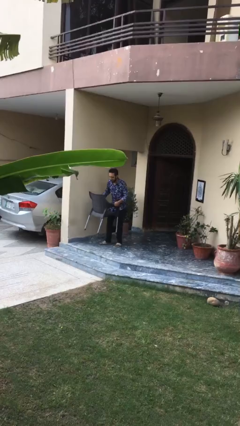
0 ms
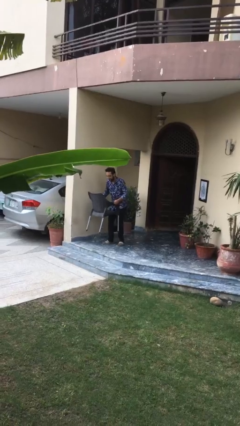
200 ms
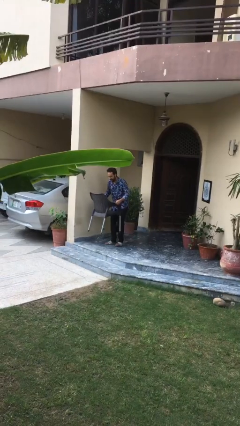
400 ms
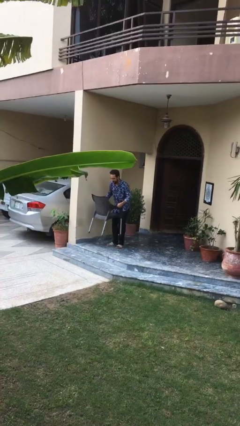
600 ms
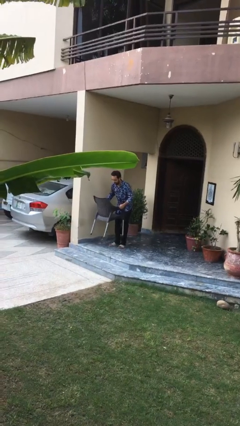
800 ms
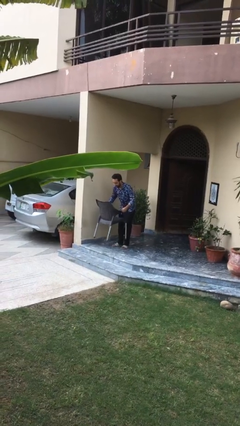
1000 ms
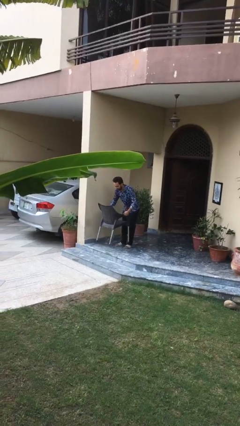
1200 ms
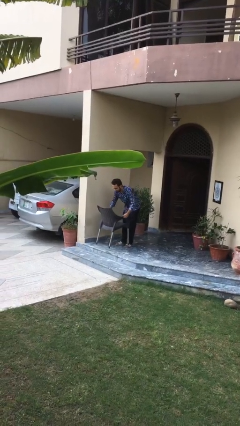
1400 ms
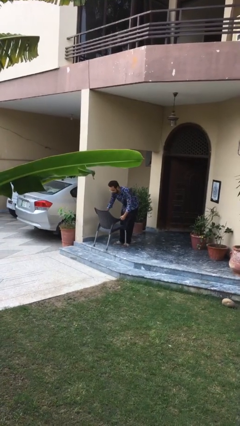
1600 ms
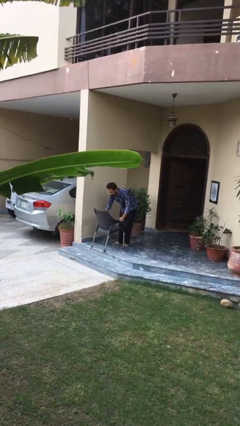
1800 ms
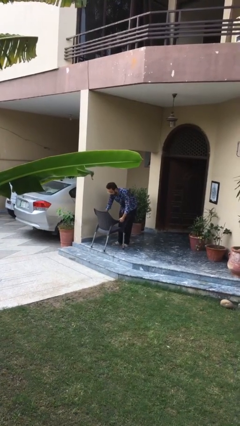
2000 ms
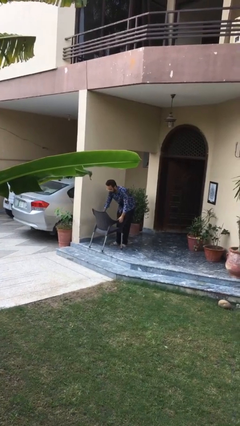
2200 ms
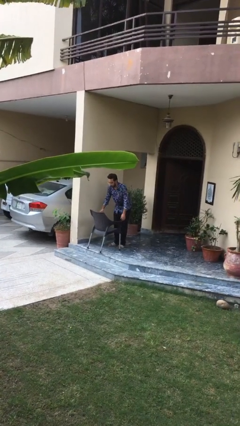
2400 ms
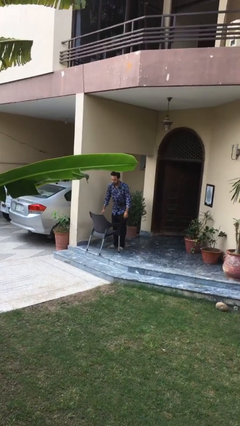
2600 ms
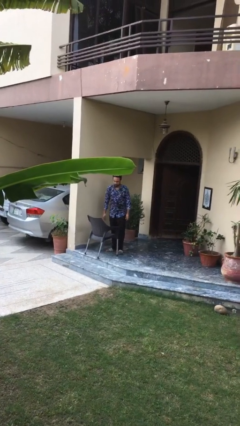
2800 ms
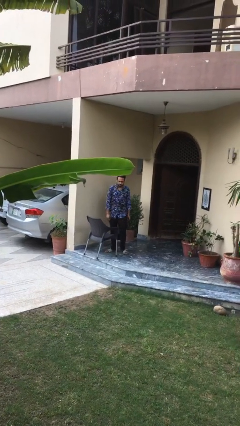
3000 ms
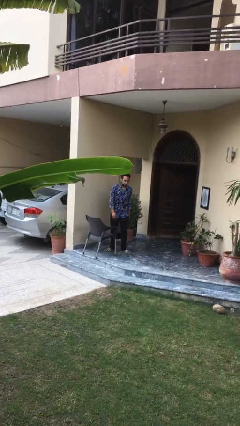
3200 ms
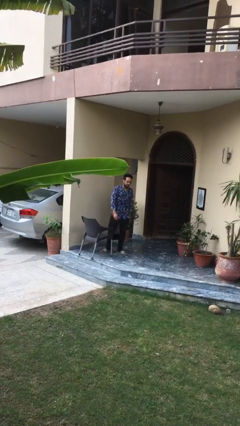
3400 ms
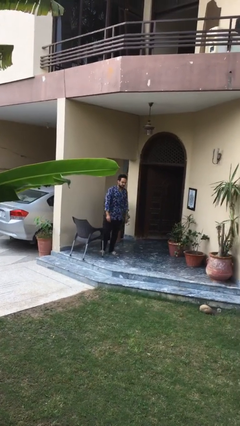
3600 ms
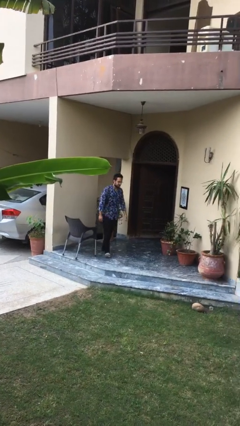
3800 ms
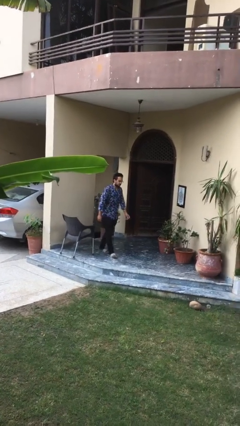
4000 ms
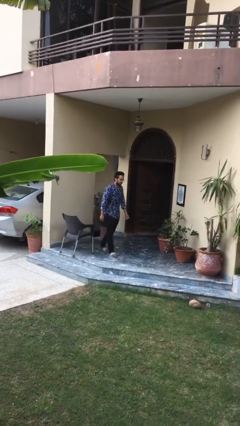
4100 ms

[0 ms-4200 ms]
person puts down object on floor

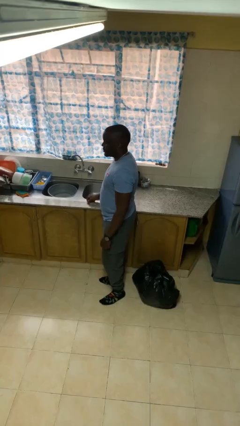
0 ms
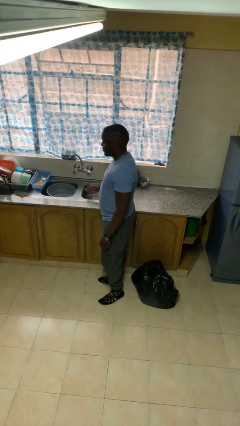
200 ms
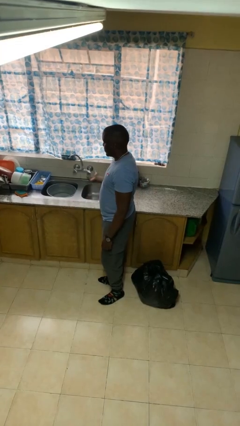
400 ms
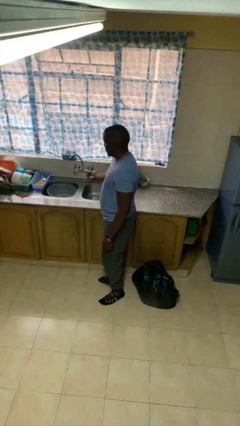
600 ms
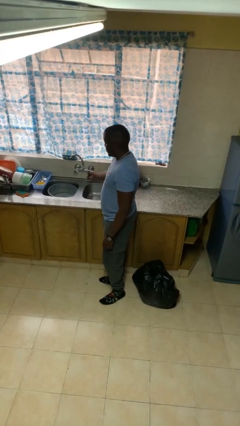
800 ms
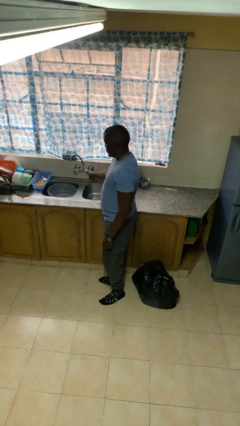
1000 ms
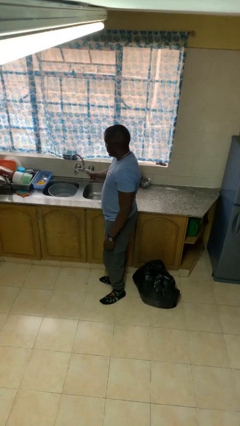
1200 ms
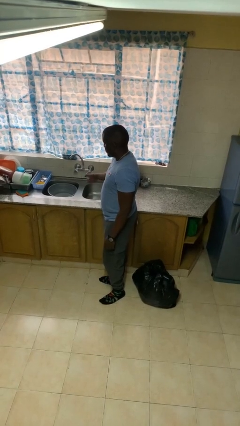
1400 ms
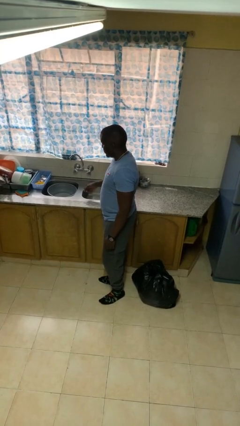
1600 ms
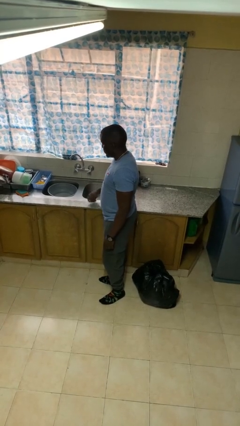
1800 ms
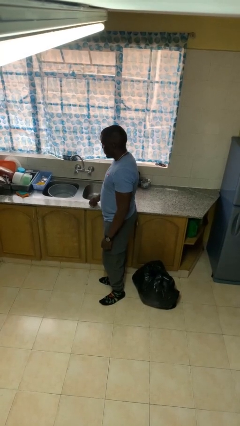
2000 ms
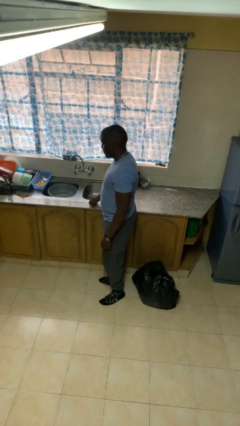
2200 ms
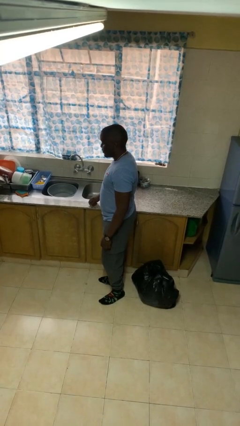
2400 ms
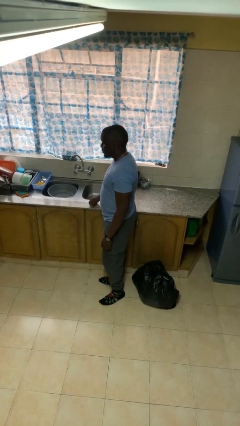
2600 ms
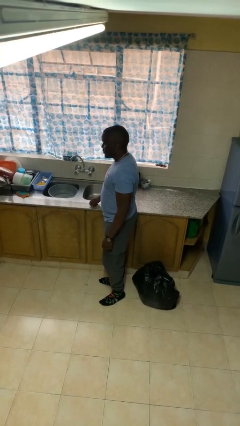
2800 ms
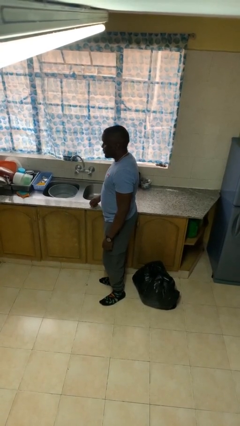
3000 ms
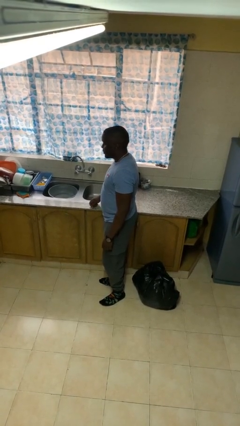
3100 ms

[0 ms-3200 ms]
person turns on faucet

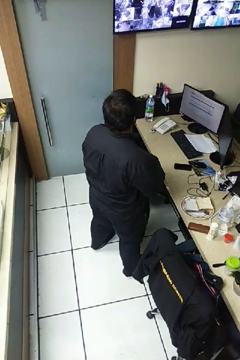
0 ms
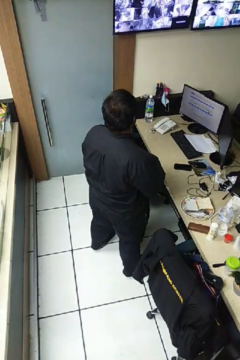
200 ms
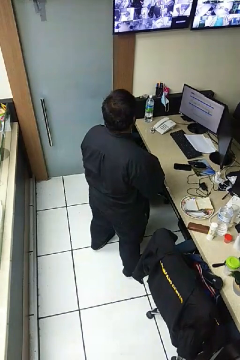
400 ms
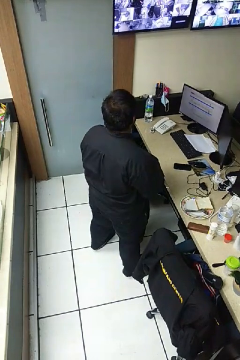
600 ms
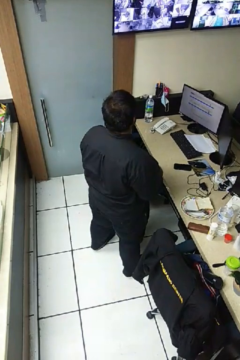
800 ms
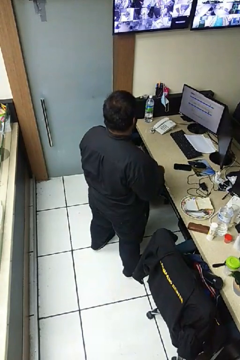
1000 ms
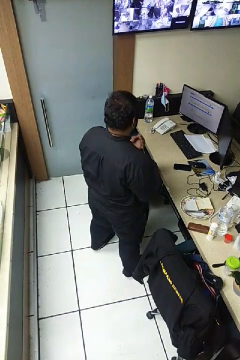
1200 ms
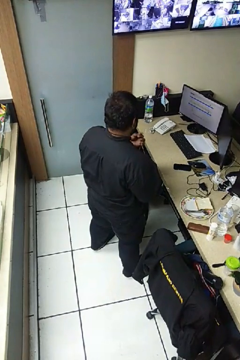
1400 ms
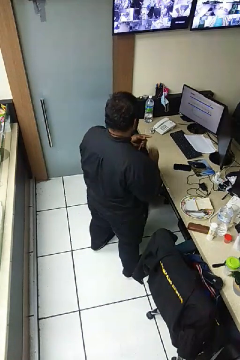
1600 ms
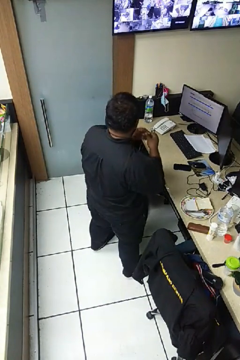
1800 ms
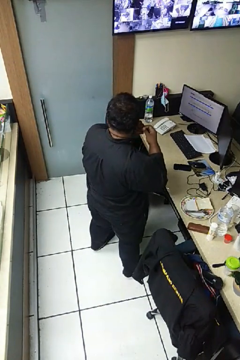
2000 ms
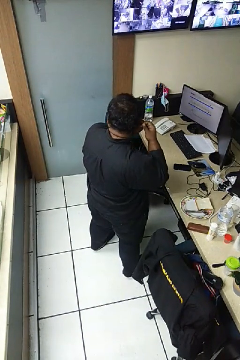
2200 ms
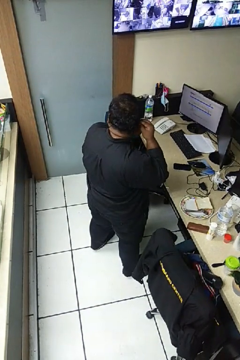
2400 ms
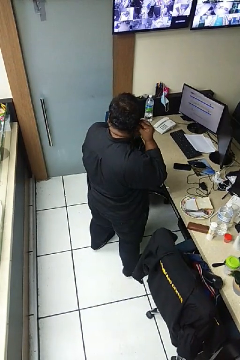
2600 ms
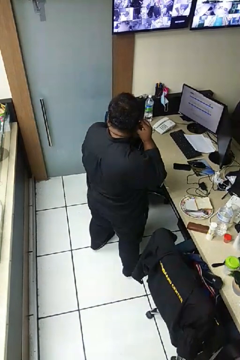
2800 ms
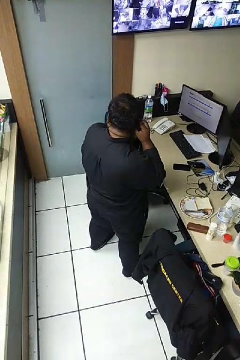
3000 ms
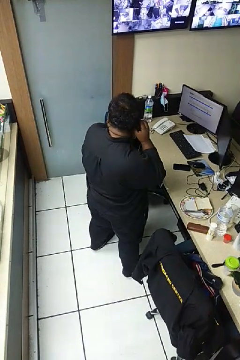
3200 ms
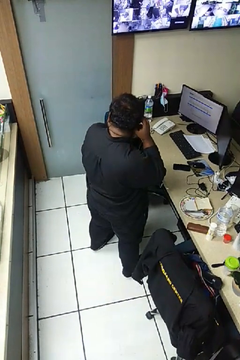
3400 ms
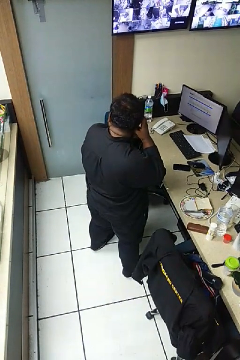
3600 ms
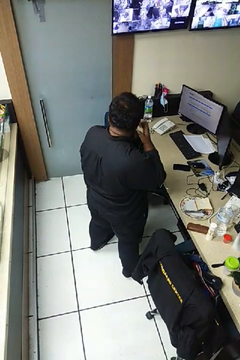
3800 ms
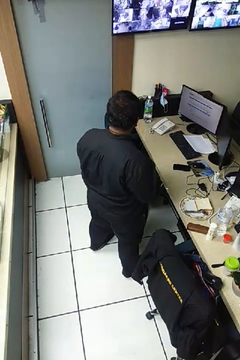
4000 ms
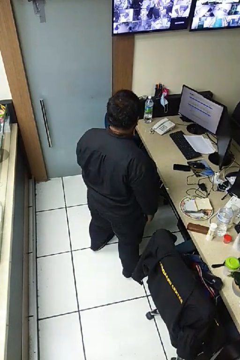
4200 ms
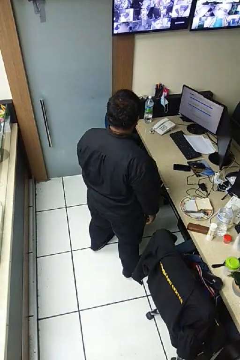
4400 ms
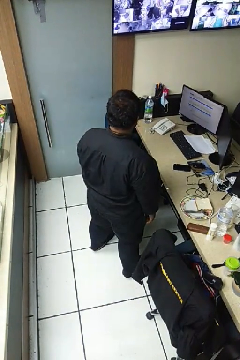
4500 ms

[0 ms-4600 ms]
person puts on earrings

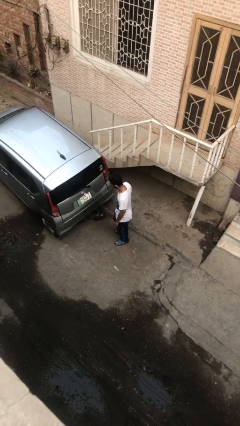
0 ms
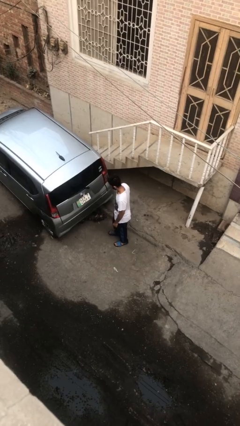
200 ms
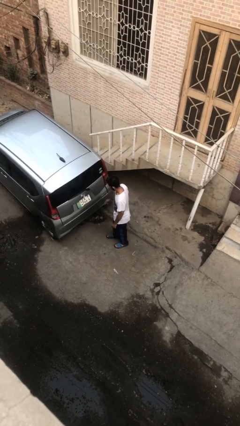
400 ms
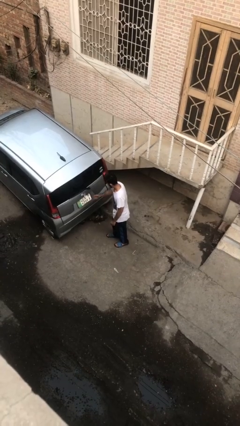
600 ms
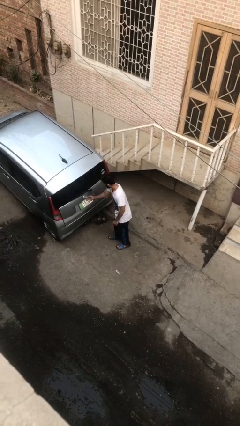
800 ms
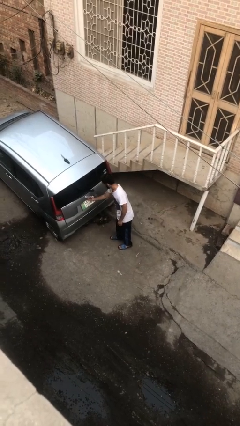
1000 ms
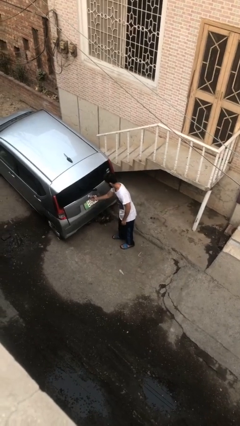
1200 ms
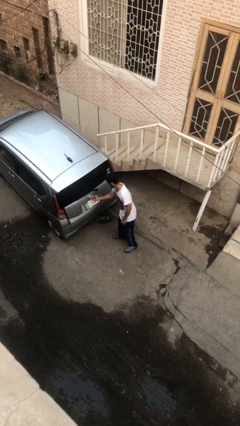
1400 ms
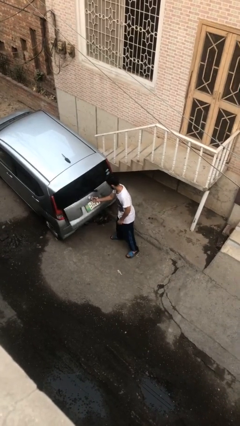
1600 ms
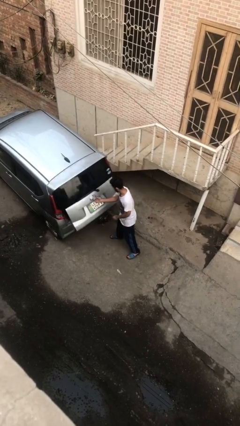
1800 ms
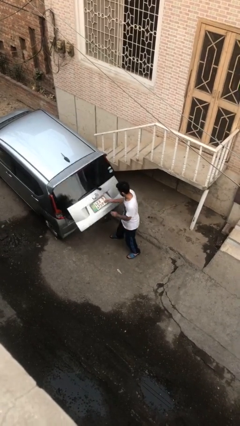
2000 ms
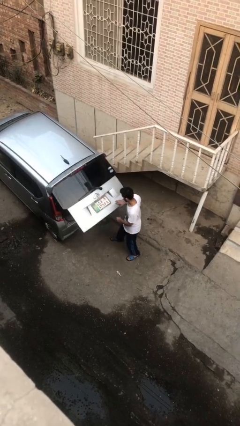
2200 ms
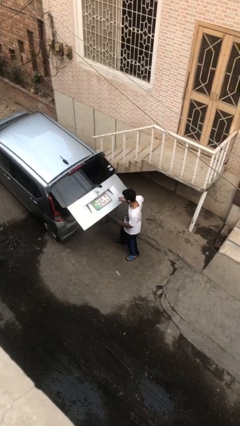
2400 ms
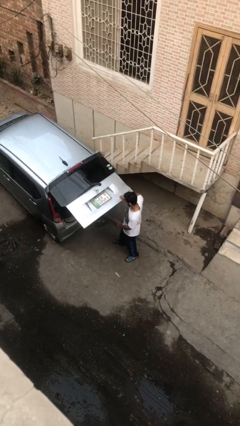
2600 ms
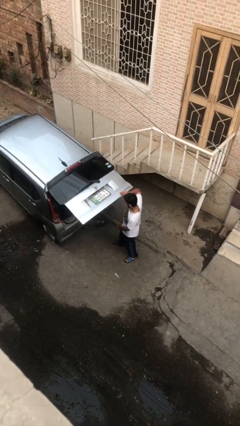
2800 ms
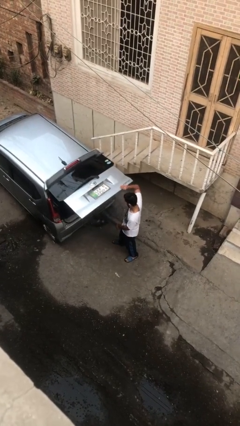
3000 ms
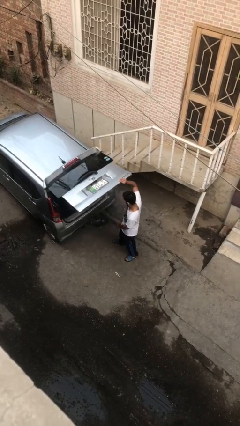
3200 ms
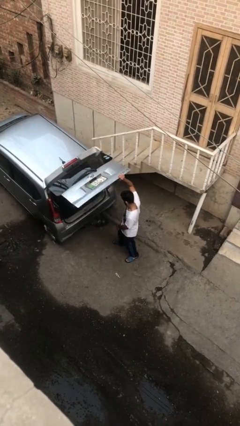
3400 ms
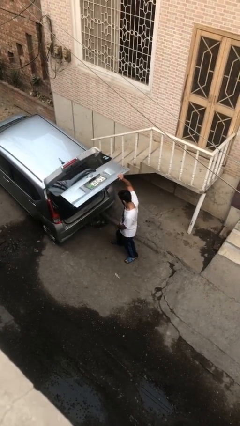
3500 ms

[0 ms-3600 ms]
person opens car trunk

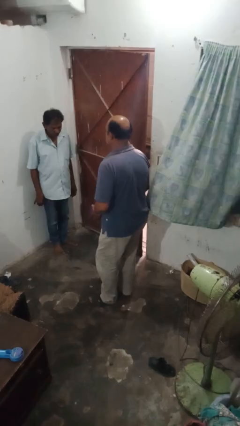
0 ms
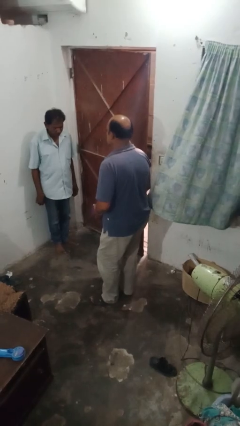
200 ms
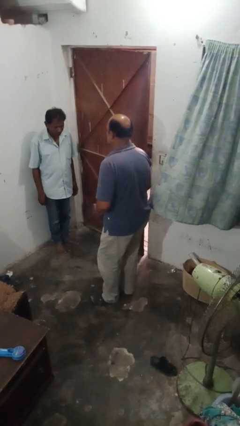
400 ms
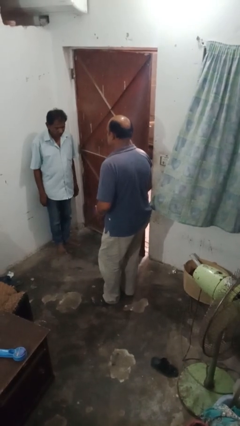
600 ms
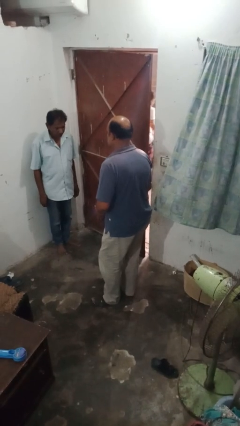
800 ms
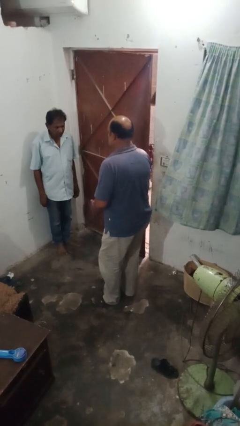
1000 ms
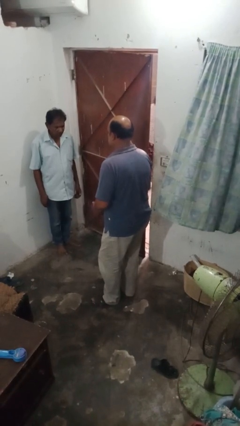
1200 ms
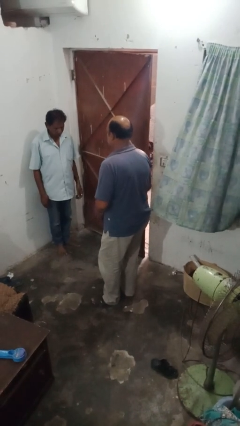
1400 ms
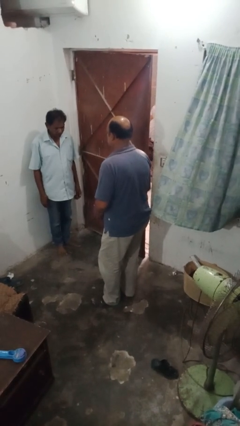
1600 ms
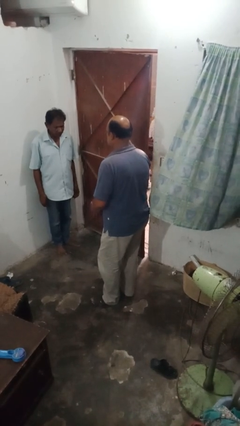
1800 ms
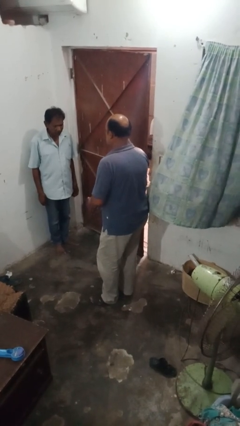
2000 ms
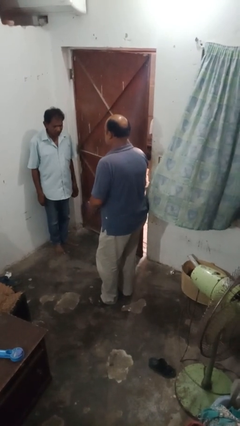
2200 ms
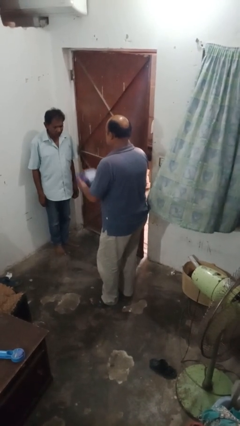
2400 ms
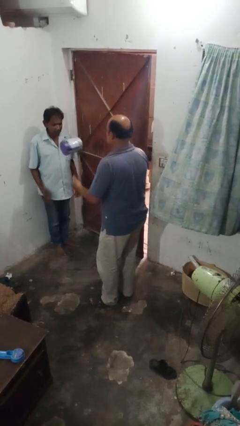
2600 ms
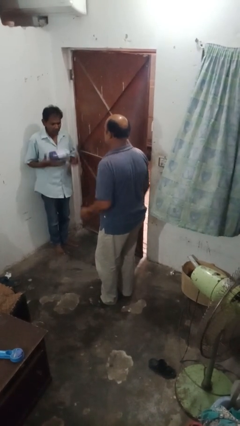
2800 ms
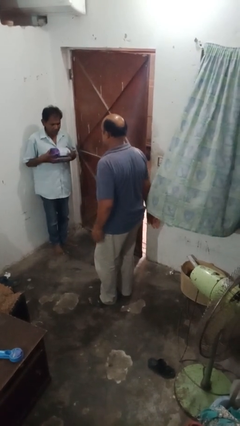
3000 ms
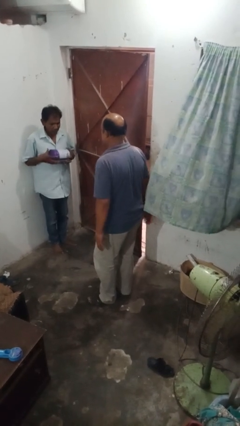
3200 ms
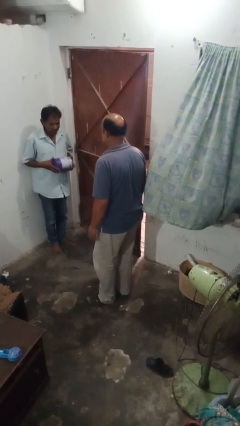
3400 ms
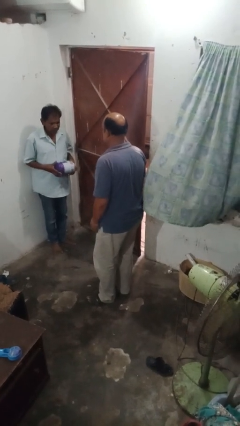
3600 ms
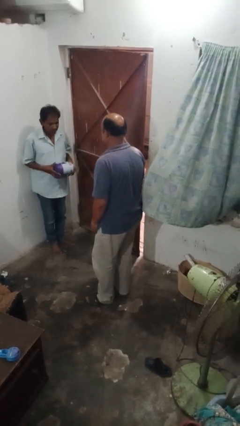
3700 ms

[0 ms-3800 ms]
person throws object to person
